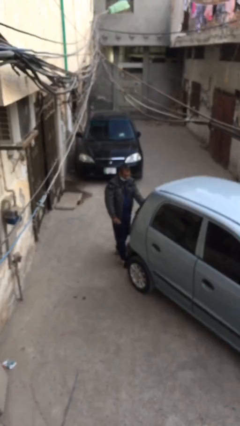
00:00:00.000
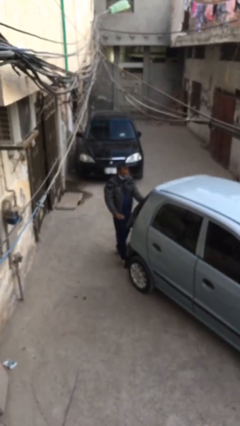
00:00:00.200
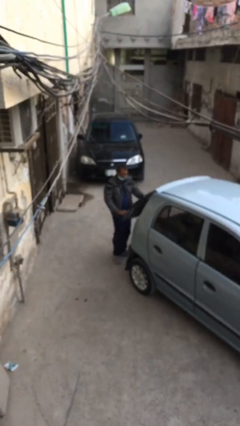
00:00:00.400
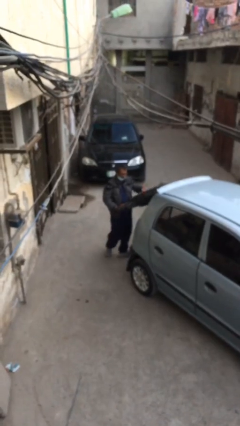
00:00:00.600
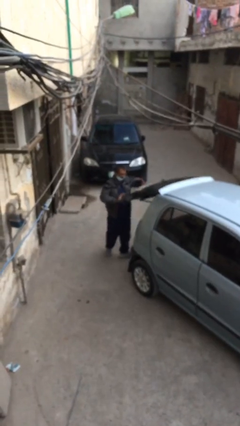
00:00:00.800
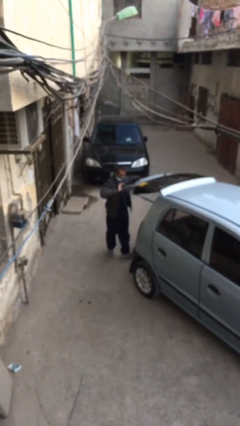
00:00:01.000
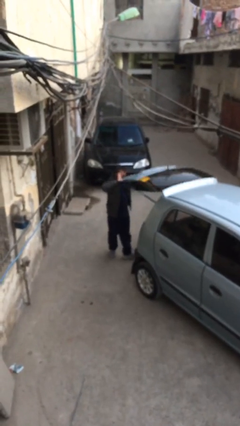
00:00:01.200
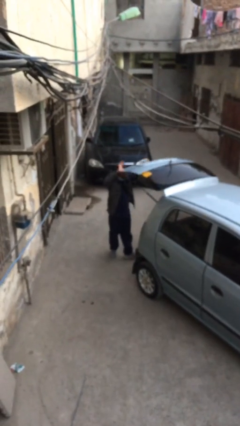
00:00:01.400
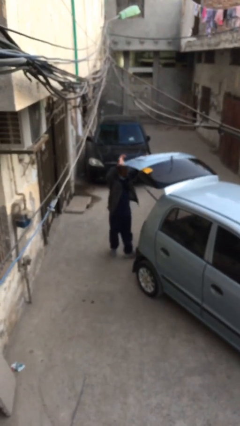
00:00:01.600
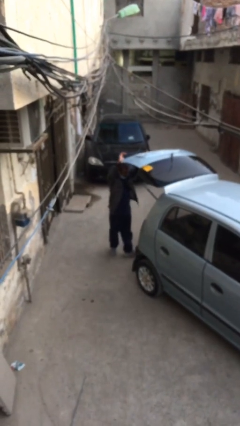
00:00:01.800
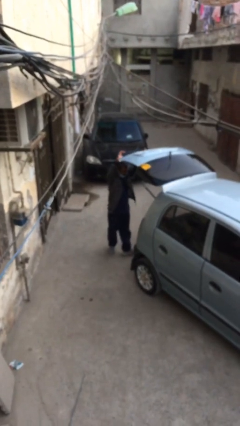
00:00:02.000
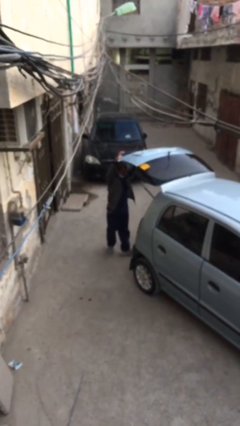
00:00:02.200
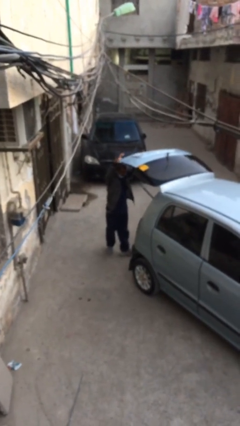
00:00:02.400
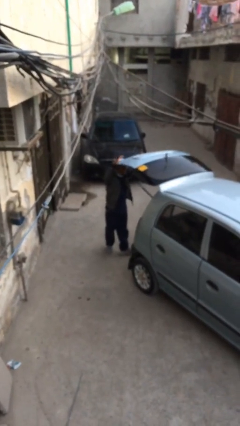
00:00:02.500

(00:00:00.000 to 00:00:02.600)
person opens car trunk

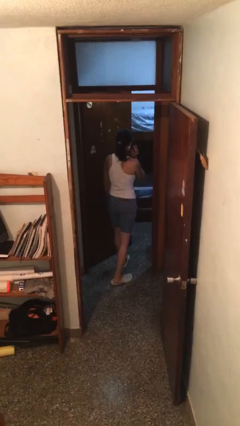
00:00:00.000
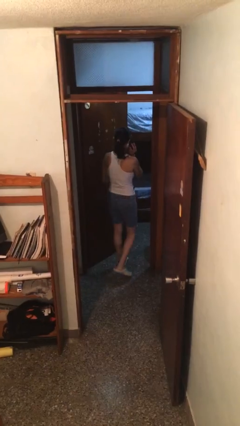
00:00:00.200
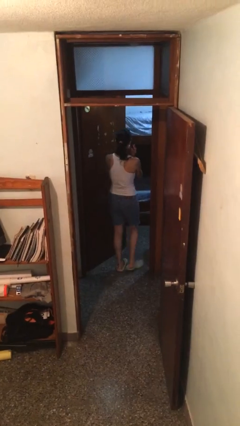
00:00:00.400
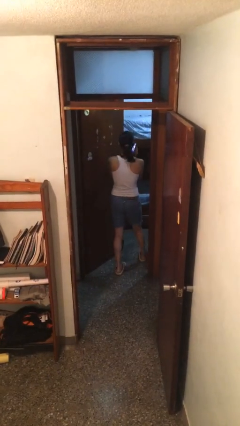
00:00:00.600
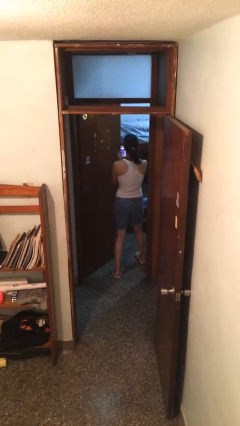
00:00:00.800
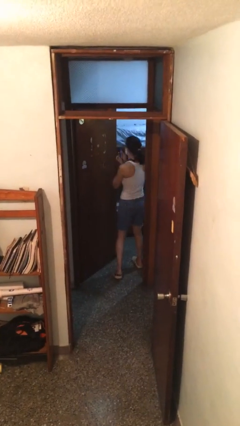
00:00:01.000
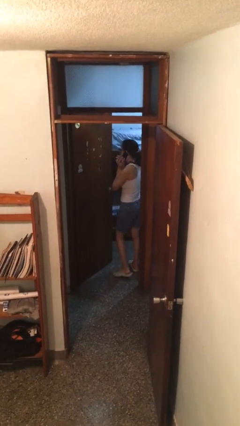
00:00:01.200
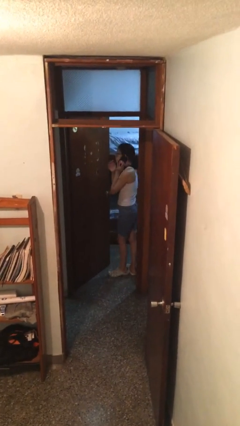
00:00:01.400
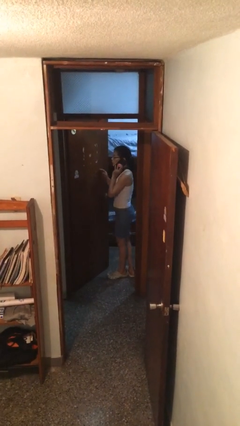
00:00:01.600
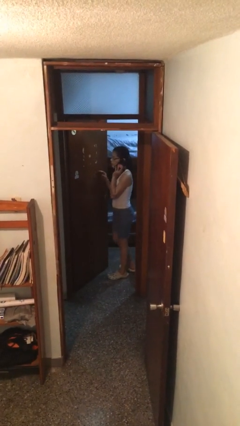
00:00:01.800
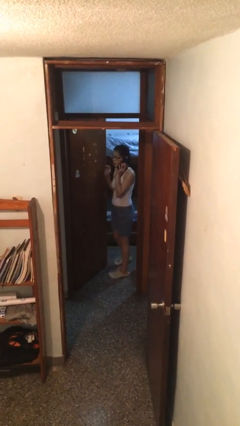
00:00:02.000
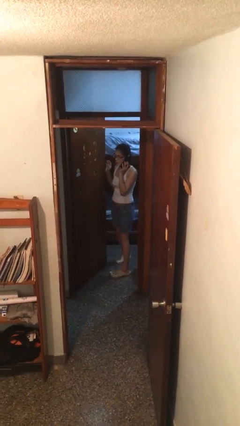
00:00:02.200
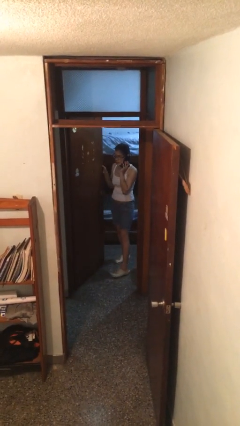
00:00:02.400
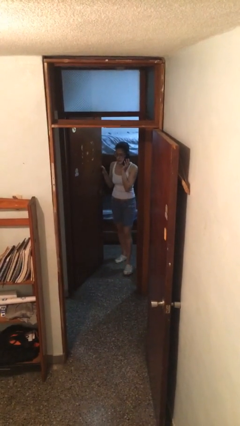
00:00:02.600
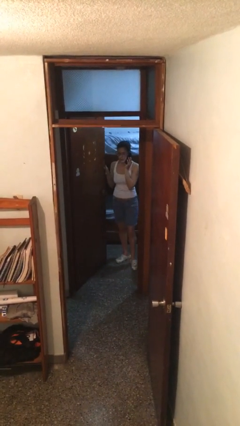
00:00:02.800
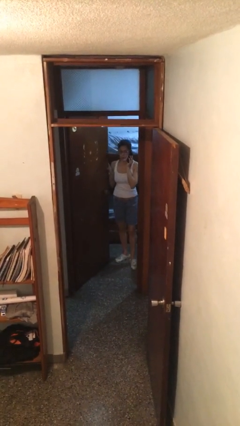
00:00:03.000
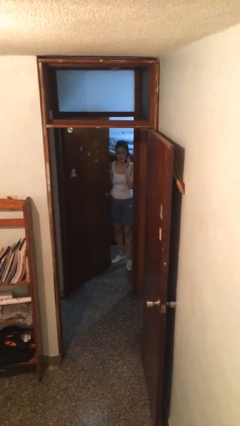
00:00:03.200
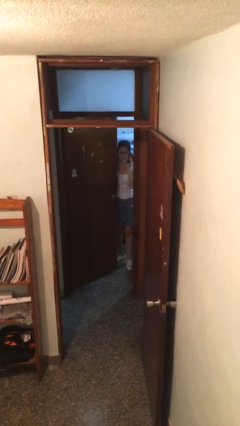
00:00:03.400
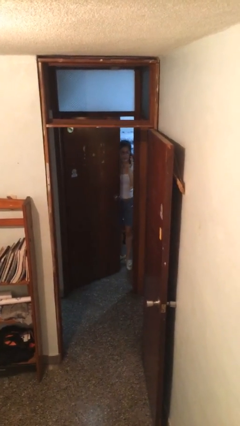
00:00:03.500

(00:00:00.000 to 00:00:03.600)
person exits scene through structure

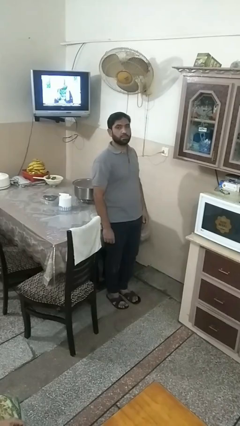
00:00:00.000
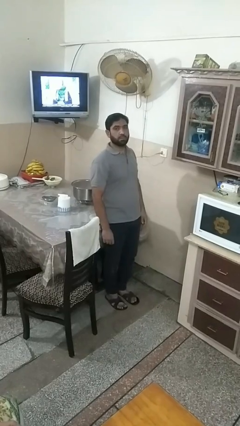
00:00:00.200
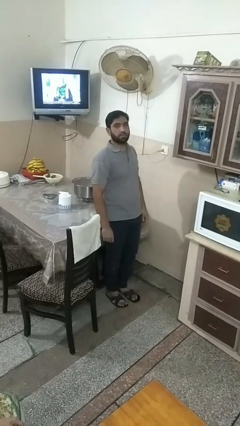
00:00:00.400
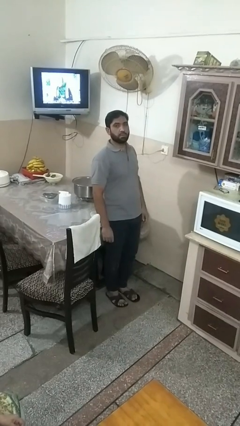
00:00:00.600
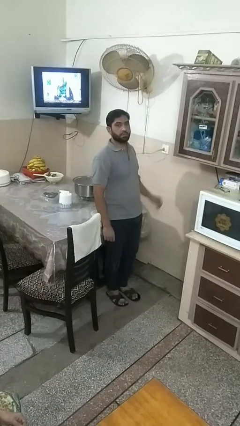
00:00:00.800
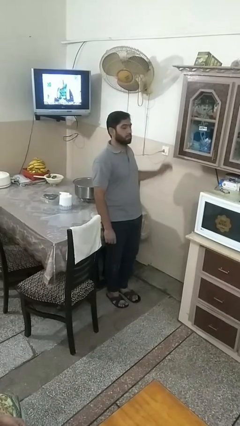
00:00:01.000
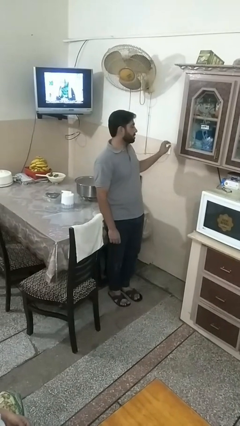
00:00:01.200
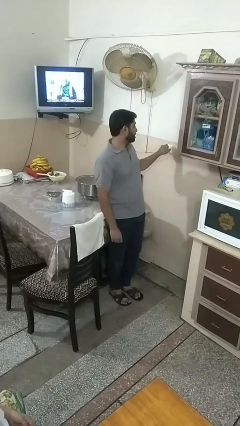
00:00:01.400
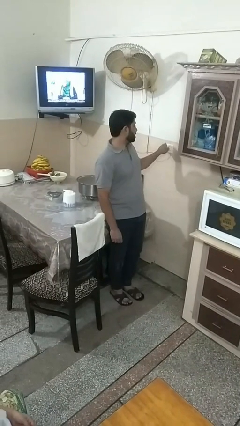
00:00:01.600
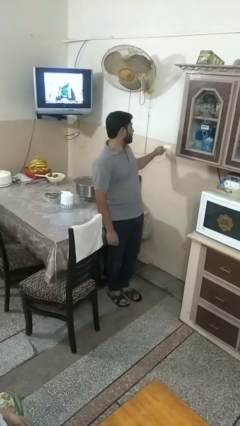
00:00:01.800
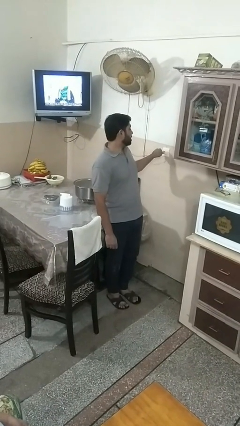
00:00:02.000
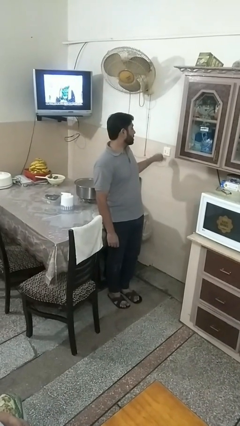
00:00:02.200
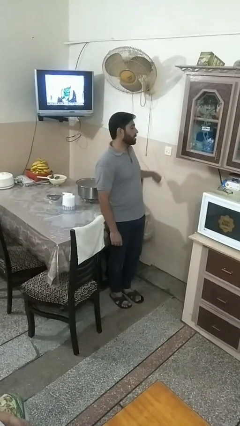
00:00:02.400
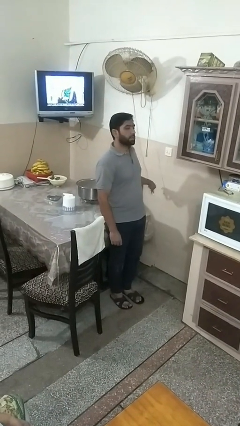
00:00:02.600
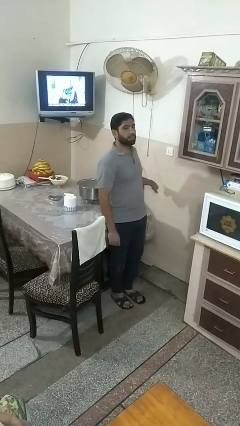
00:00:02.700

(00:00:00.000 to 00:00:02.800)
person unplugs from electrical socket

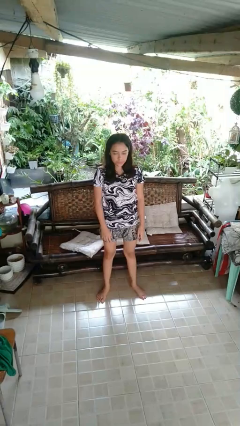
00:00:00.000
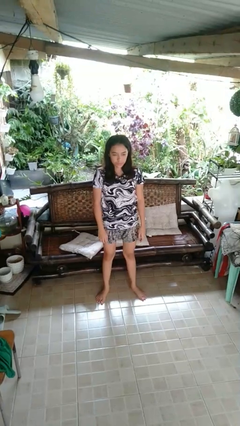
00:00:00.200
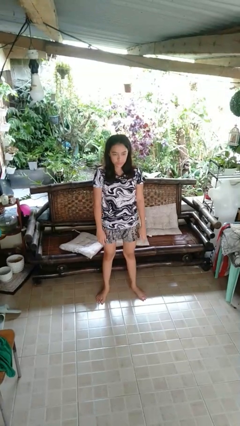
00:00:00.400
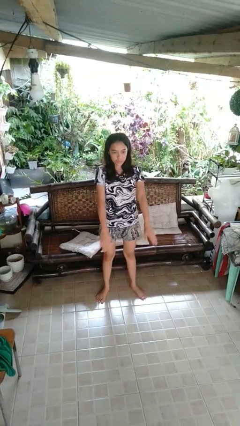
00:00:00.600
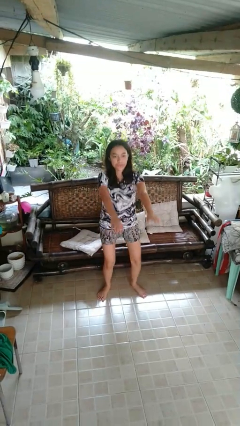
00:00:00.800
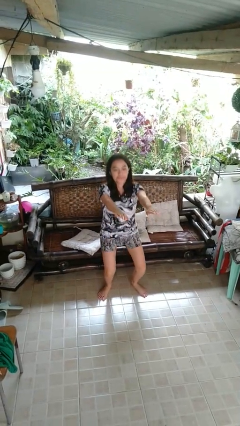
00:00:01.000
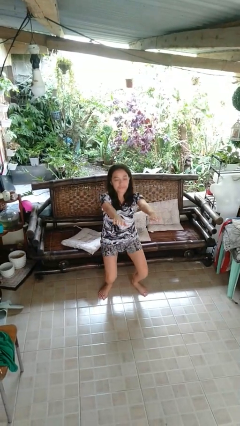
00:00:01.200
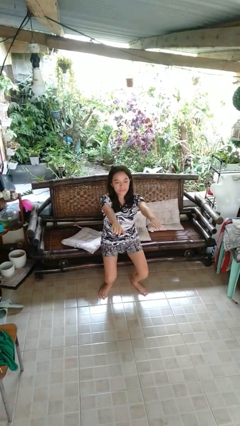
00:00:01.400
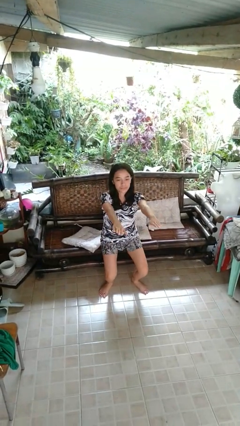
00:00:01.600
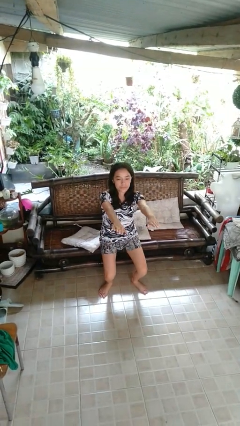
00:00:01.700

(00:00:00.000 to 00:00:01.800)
person squats

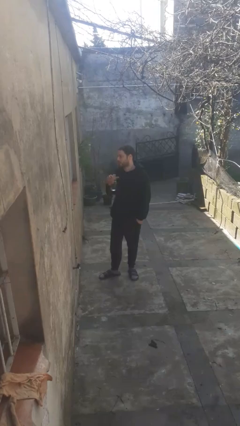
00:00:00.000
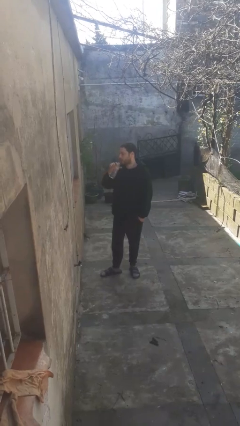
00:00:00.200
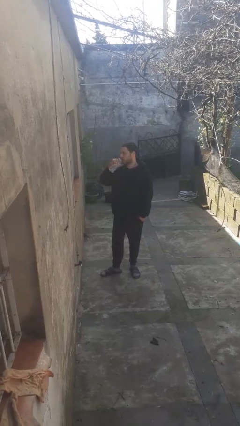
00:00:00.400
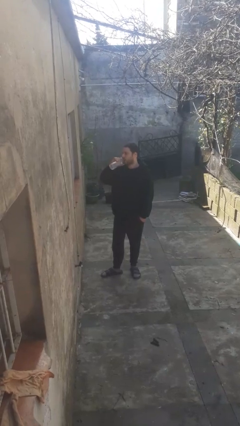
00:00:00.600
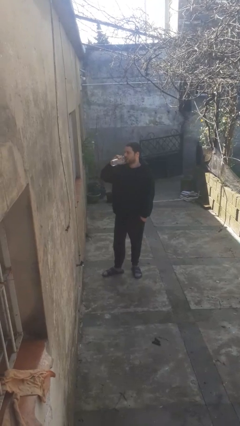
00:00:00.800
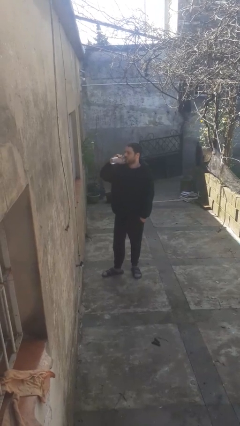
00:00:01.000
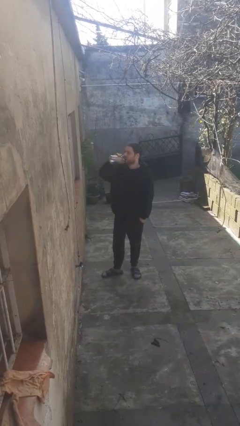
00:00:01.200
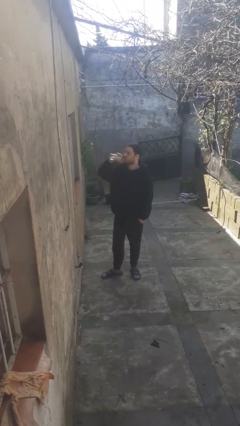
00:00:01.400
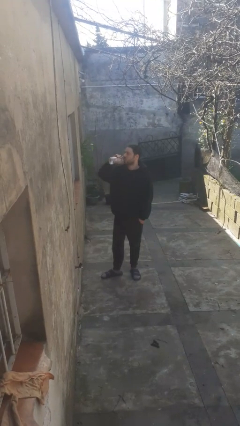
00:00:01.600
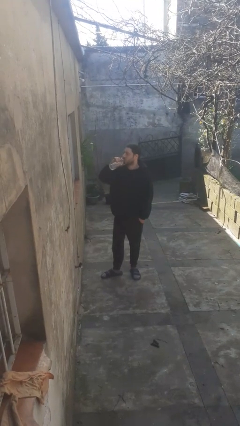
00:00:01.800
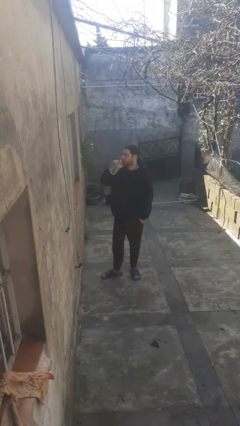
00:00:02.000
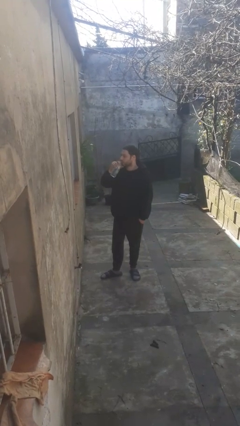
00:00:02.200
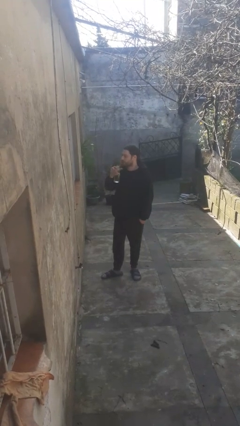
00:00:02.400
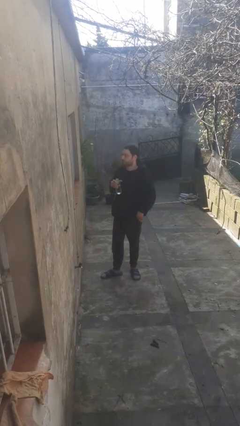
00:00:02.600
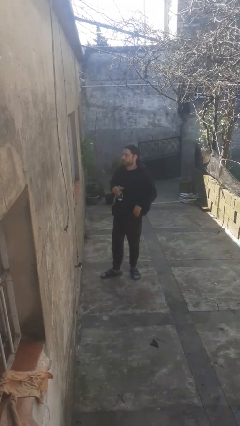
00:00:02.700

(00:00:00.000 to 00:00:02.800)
person drinks from bottle

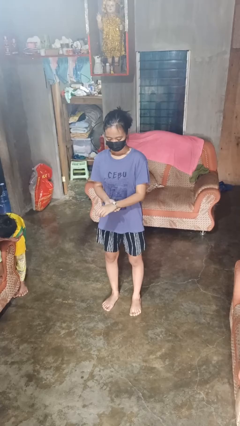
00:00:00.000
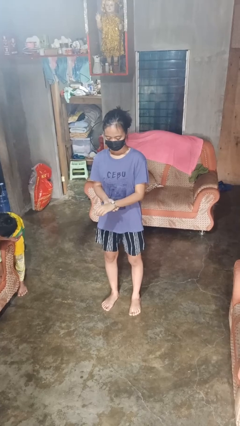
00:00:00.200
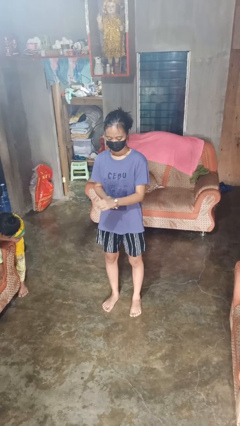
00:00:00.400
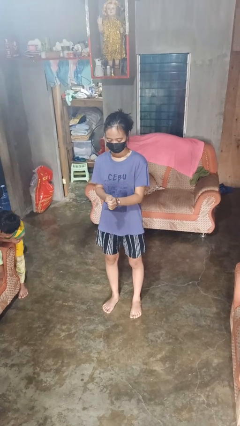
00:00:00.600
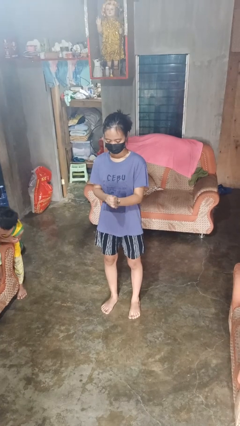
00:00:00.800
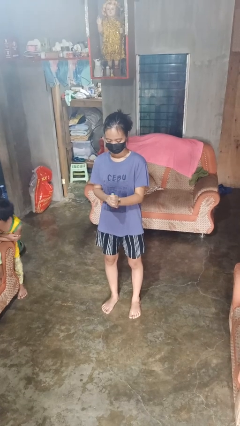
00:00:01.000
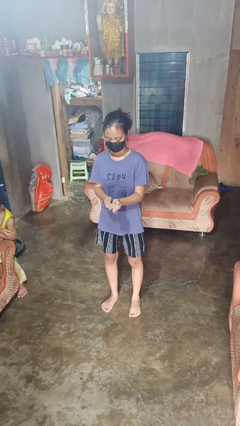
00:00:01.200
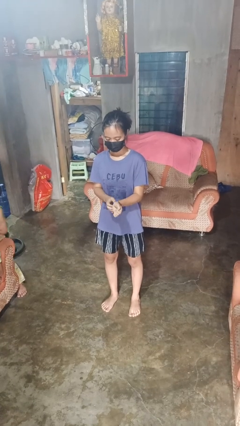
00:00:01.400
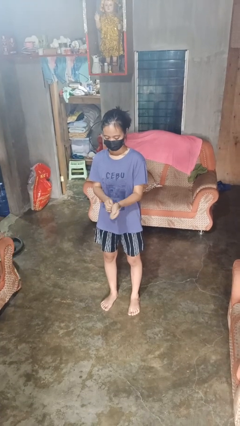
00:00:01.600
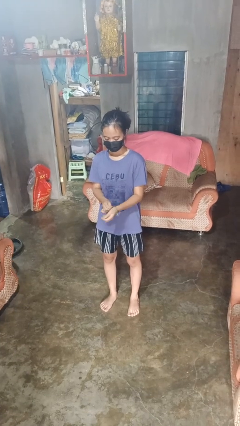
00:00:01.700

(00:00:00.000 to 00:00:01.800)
person takes off wristwatch

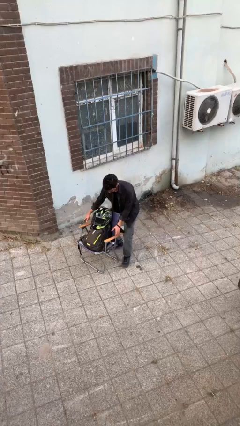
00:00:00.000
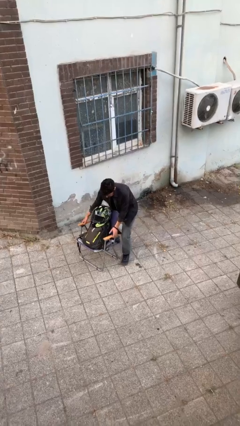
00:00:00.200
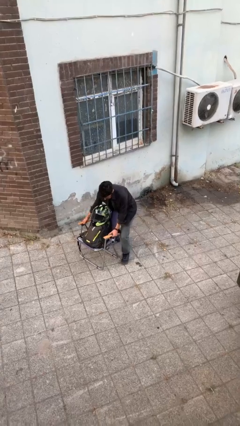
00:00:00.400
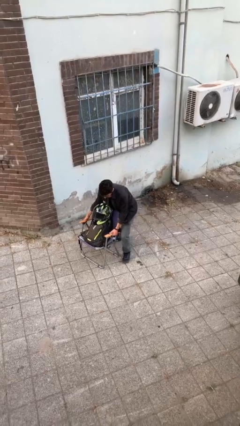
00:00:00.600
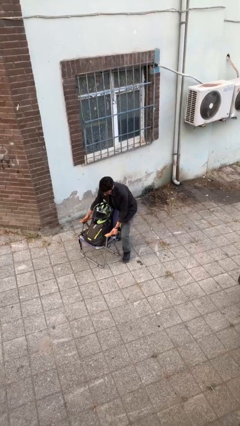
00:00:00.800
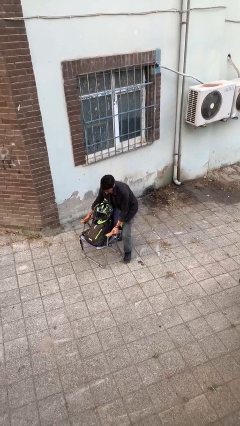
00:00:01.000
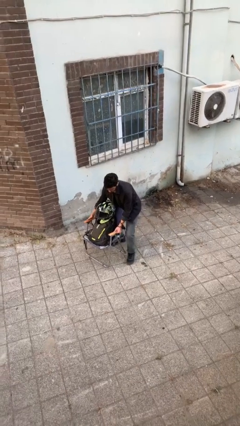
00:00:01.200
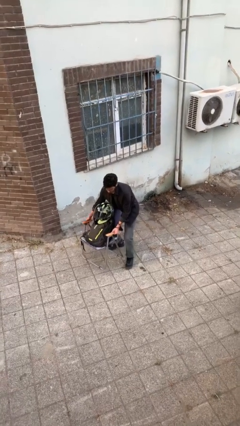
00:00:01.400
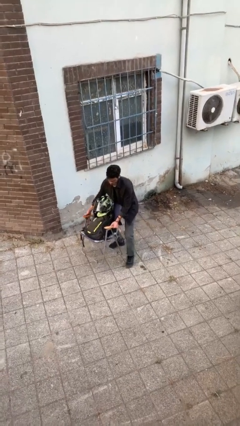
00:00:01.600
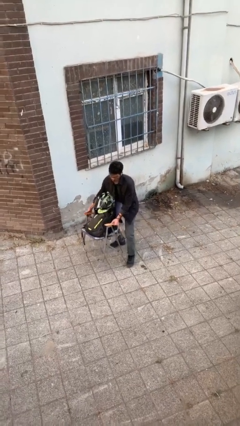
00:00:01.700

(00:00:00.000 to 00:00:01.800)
person picks up object from floor
